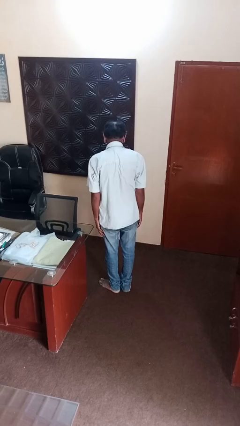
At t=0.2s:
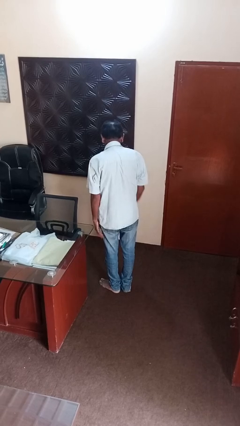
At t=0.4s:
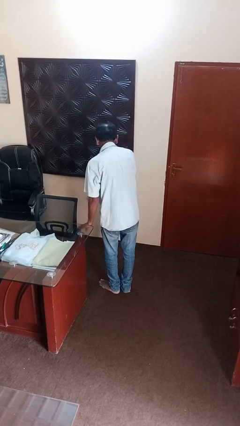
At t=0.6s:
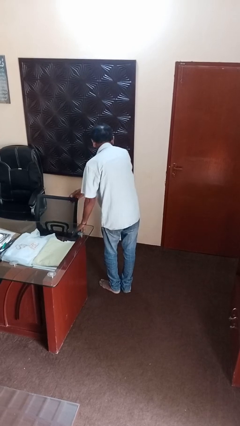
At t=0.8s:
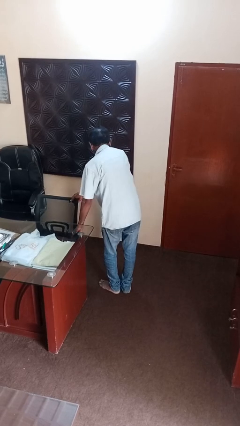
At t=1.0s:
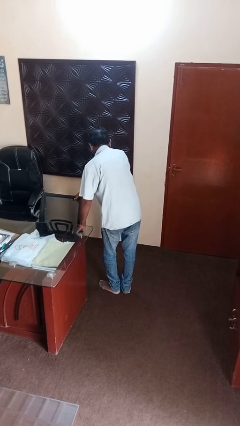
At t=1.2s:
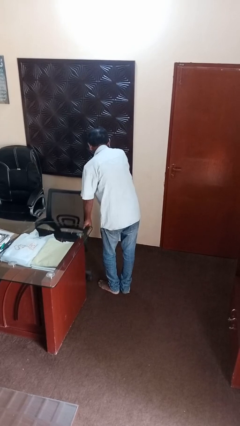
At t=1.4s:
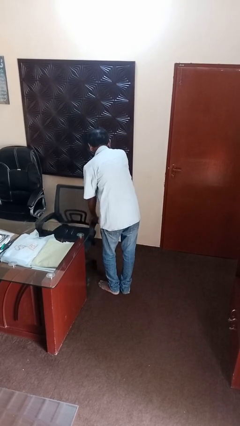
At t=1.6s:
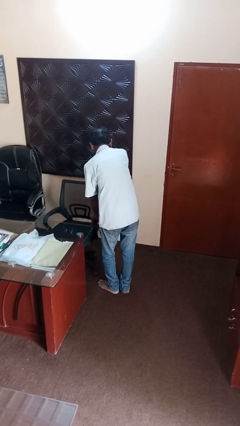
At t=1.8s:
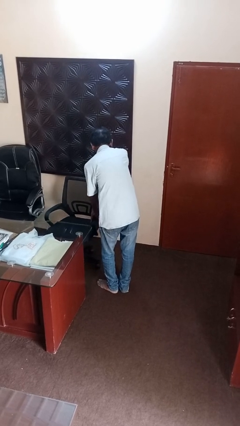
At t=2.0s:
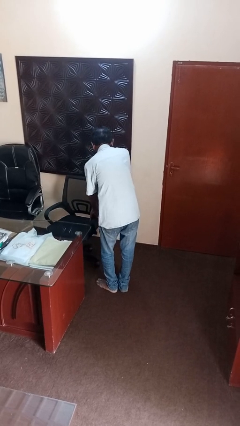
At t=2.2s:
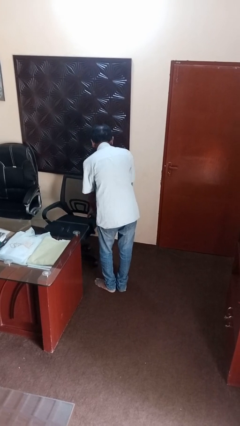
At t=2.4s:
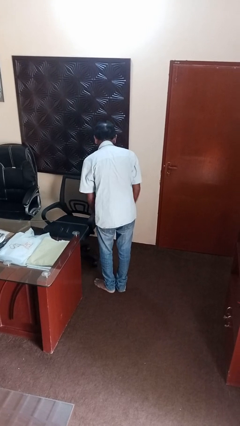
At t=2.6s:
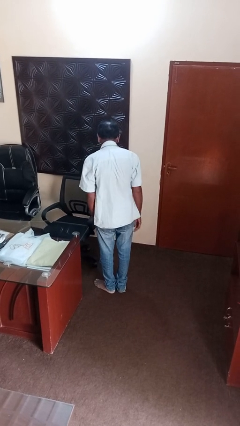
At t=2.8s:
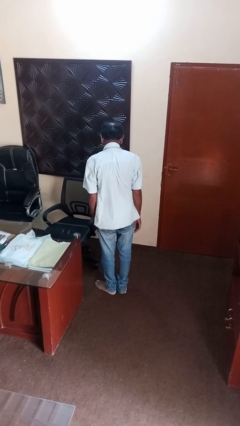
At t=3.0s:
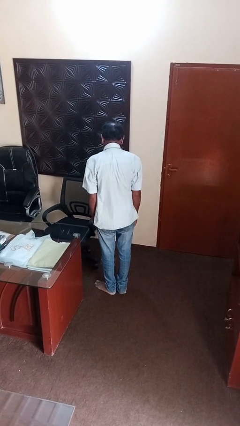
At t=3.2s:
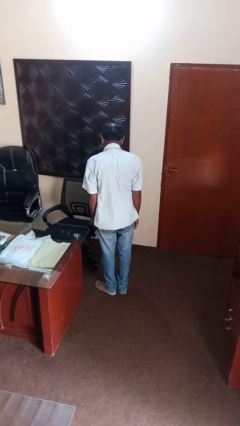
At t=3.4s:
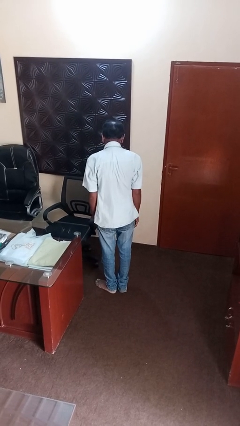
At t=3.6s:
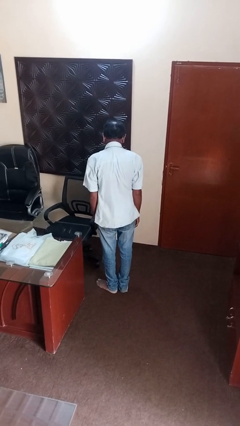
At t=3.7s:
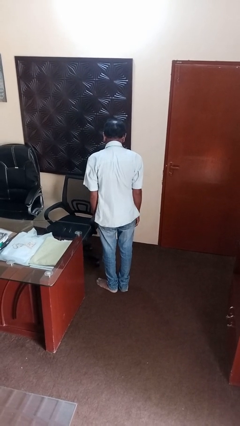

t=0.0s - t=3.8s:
person pulls out chair

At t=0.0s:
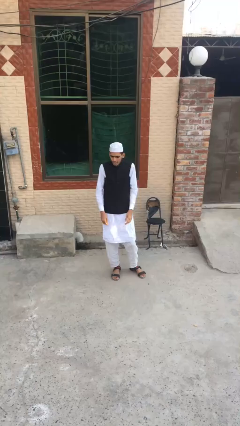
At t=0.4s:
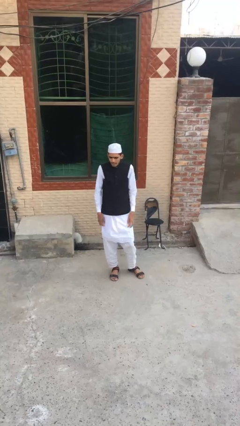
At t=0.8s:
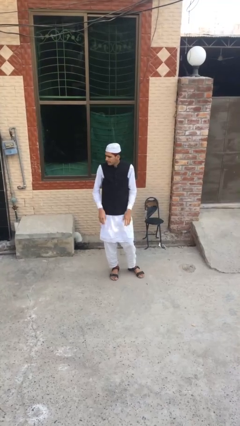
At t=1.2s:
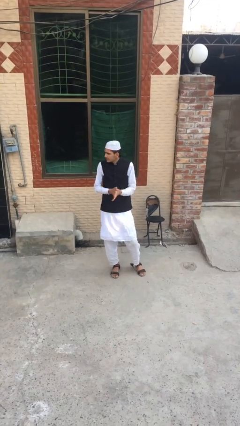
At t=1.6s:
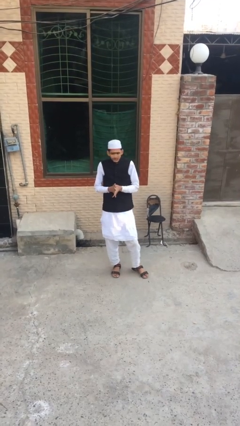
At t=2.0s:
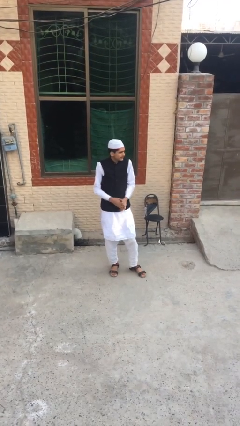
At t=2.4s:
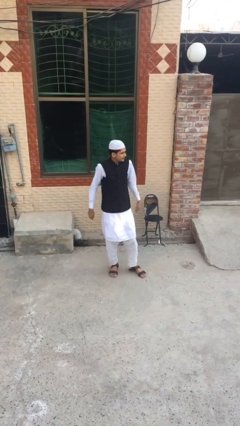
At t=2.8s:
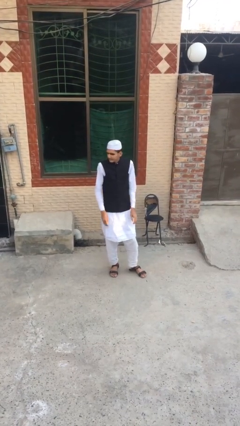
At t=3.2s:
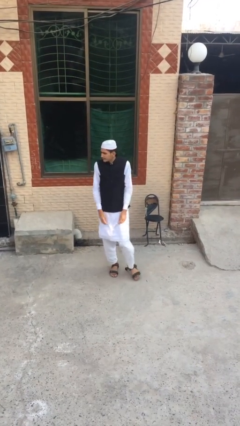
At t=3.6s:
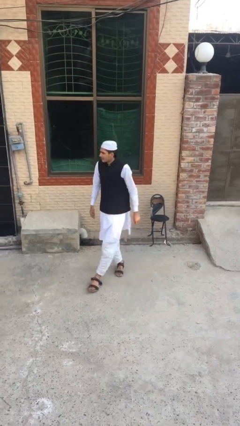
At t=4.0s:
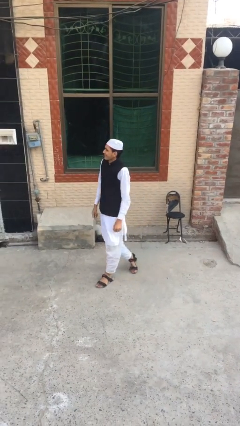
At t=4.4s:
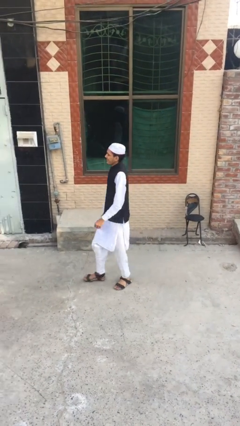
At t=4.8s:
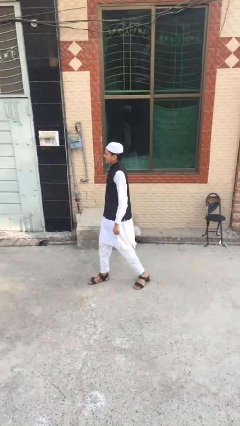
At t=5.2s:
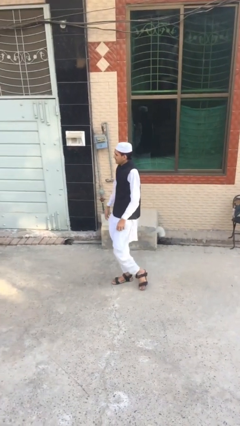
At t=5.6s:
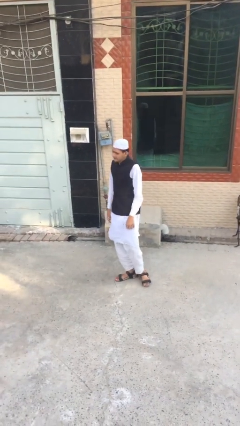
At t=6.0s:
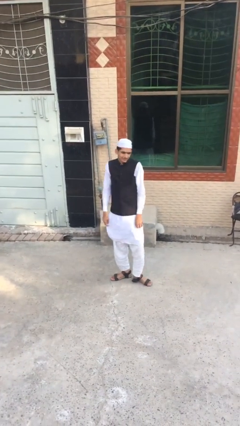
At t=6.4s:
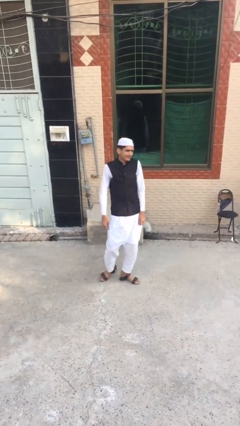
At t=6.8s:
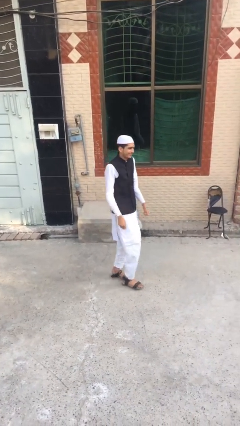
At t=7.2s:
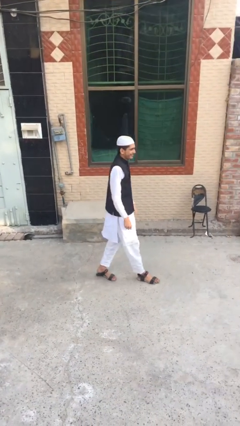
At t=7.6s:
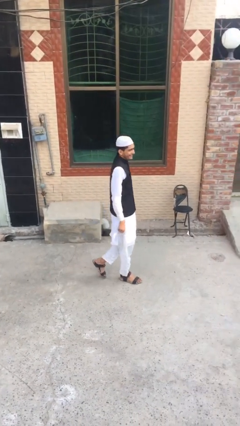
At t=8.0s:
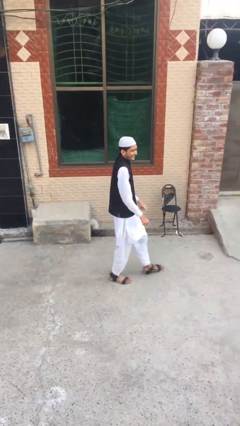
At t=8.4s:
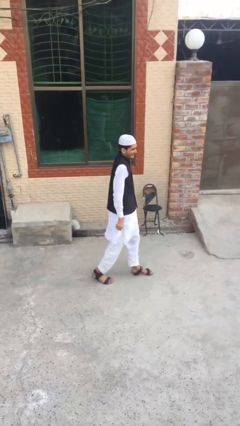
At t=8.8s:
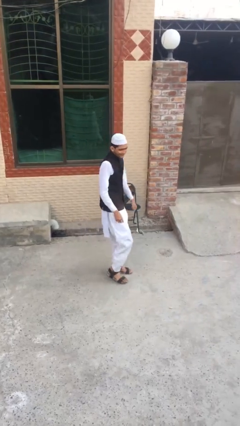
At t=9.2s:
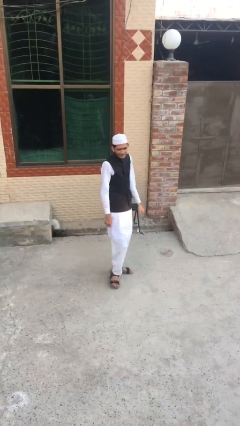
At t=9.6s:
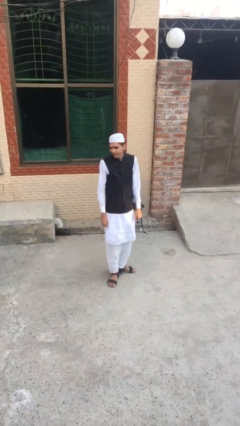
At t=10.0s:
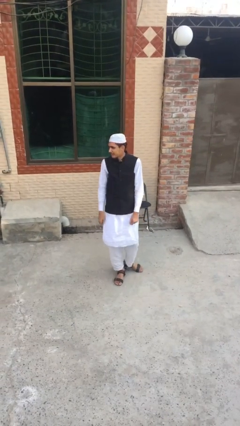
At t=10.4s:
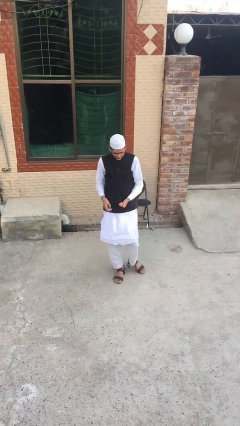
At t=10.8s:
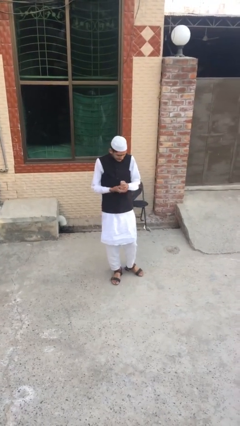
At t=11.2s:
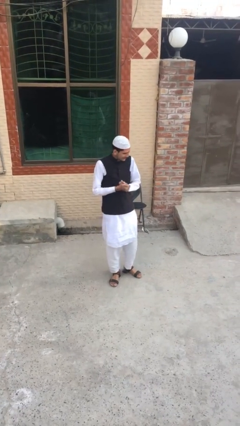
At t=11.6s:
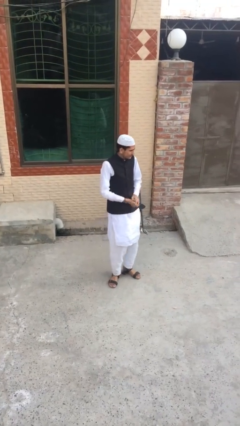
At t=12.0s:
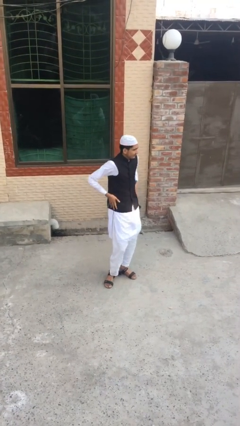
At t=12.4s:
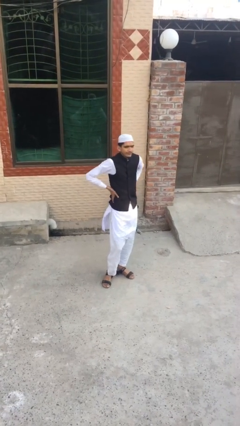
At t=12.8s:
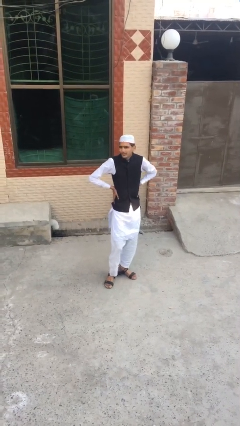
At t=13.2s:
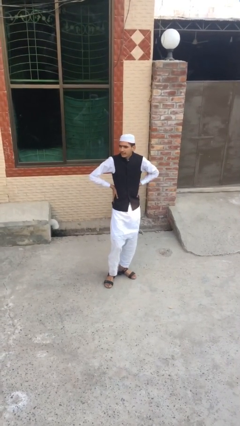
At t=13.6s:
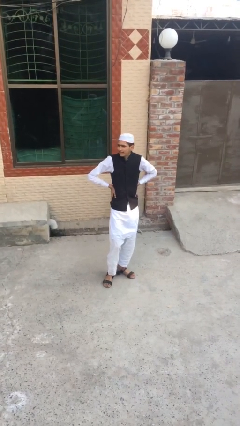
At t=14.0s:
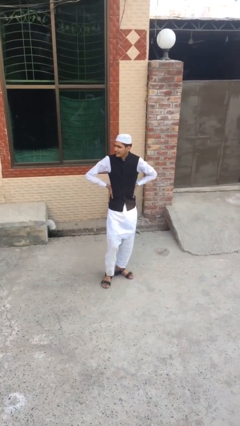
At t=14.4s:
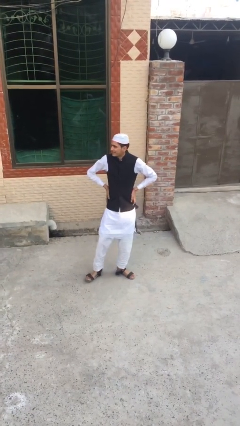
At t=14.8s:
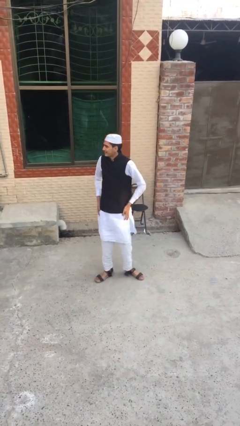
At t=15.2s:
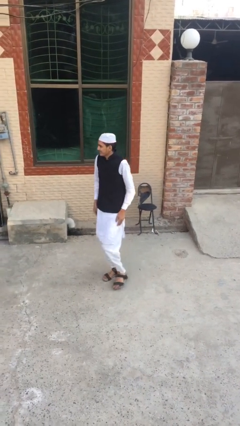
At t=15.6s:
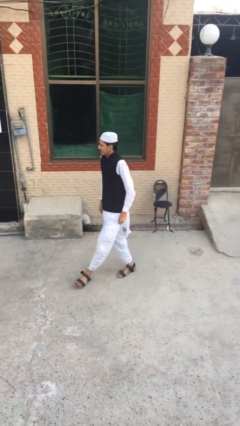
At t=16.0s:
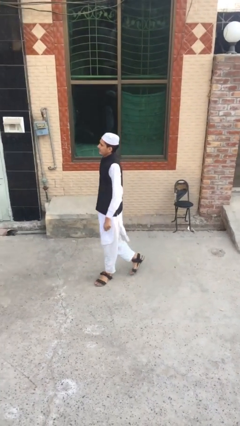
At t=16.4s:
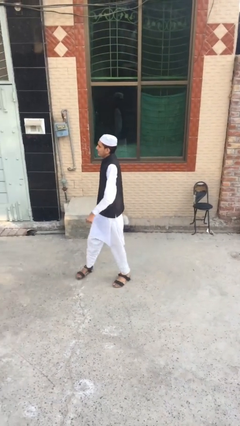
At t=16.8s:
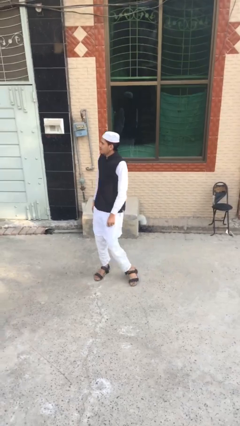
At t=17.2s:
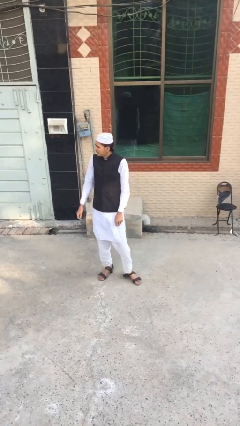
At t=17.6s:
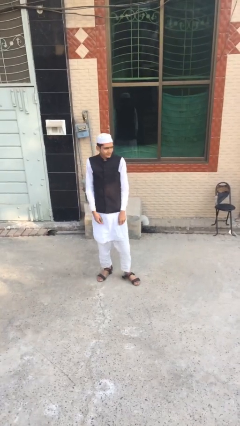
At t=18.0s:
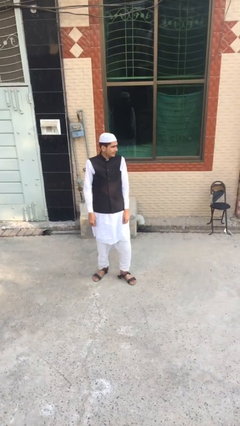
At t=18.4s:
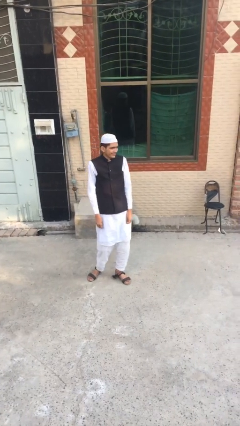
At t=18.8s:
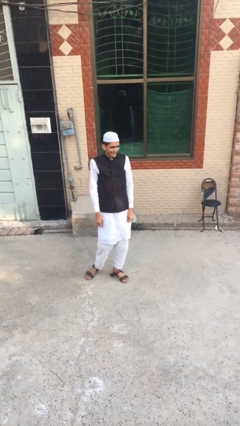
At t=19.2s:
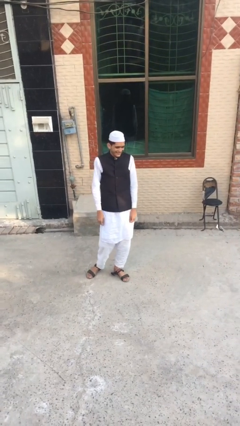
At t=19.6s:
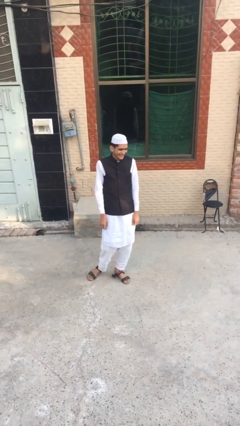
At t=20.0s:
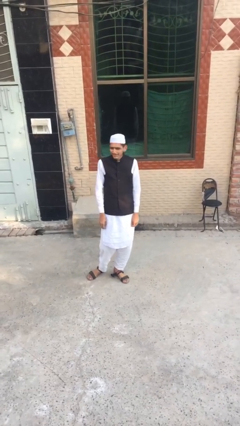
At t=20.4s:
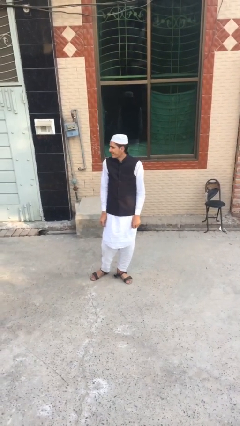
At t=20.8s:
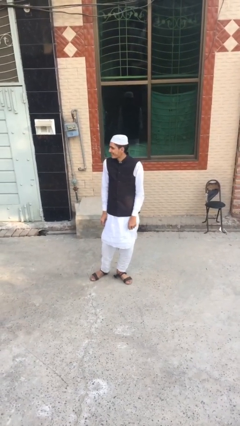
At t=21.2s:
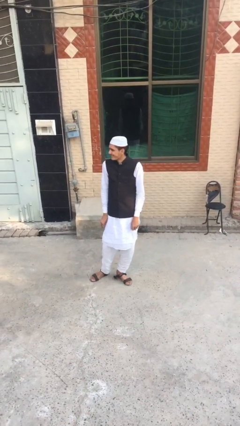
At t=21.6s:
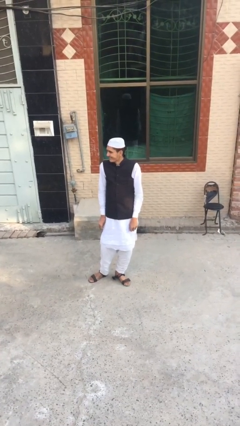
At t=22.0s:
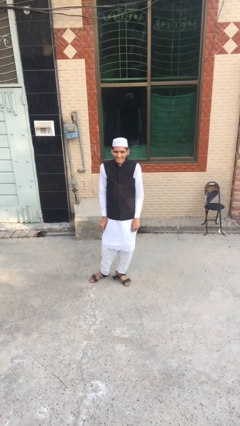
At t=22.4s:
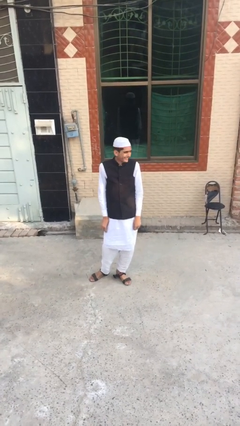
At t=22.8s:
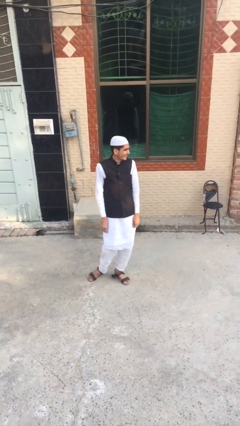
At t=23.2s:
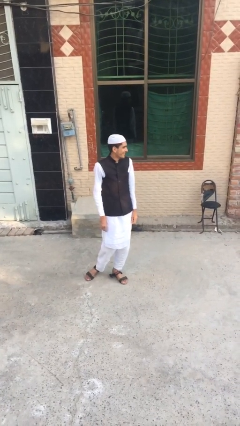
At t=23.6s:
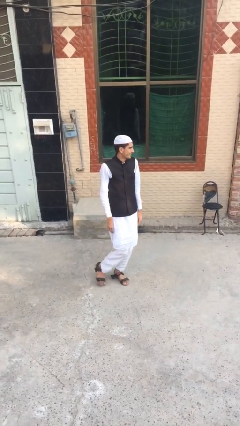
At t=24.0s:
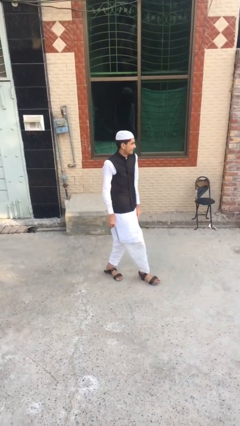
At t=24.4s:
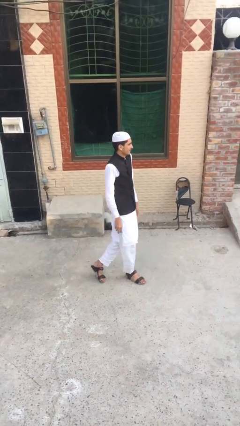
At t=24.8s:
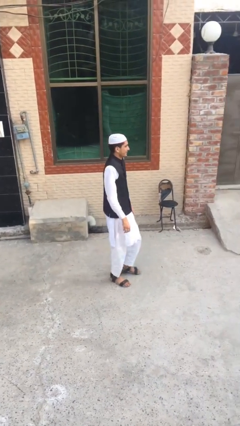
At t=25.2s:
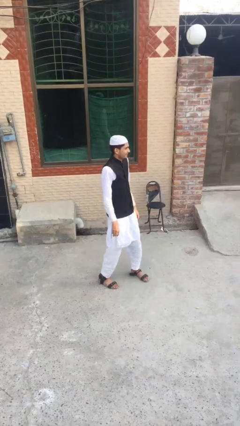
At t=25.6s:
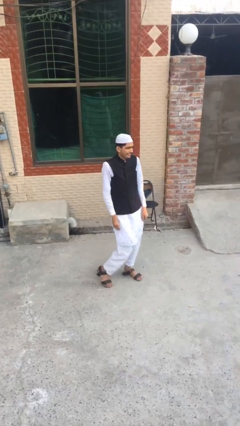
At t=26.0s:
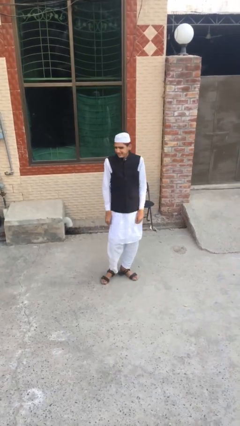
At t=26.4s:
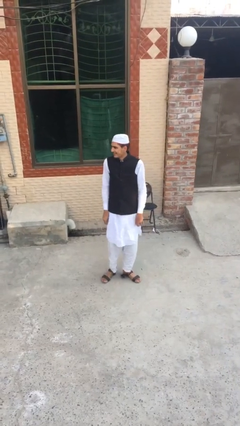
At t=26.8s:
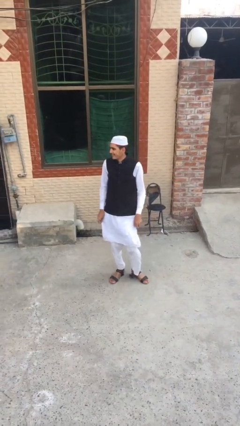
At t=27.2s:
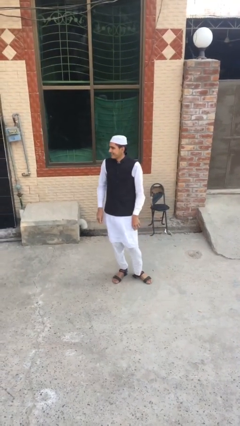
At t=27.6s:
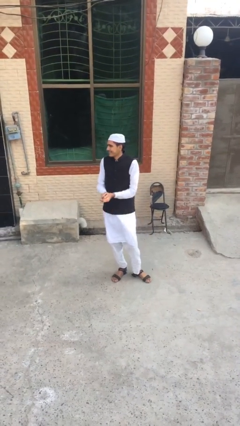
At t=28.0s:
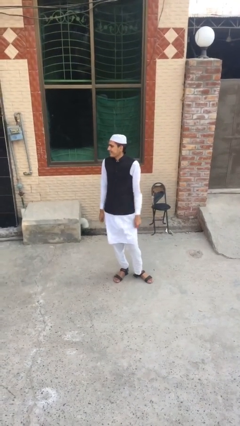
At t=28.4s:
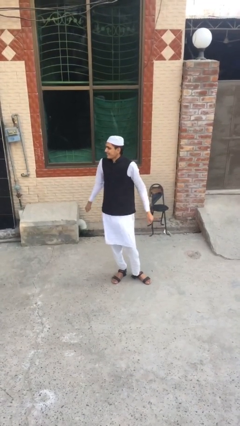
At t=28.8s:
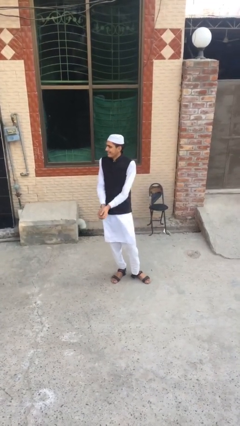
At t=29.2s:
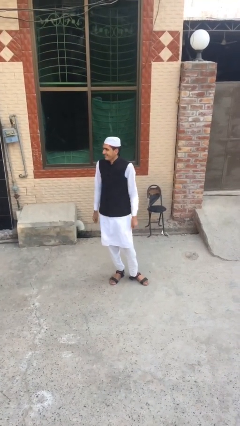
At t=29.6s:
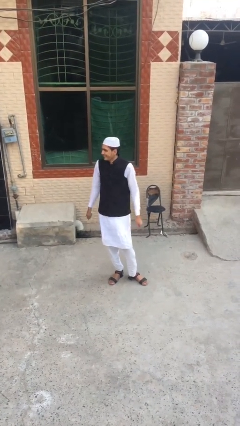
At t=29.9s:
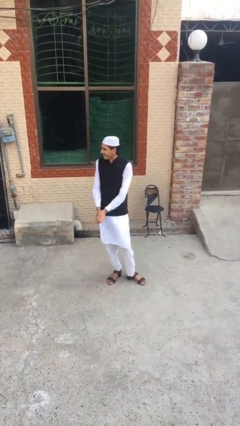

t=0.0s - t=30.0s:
person walks
